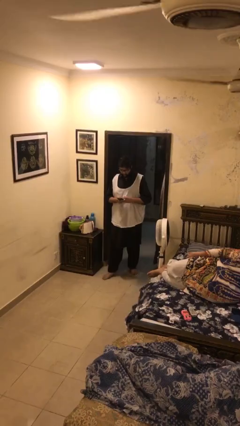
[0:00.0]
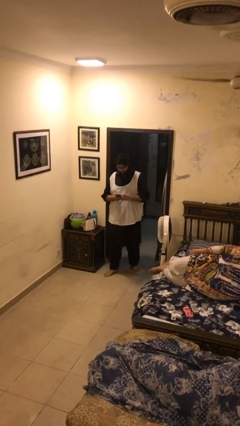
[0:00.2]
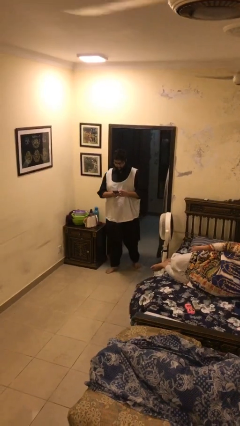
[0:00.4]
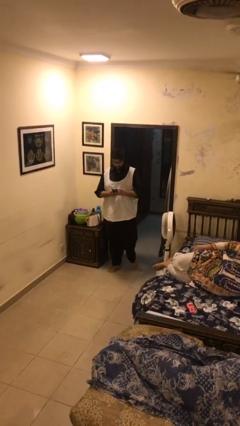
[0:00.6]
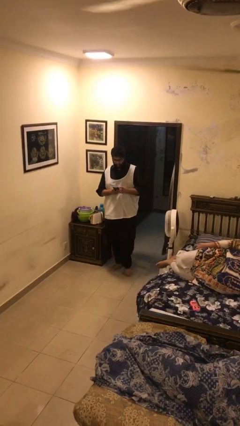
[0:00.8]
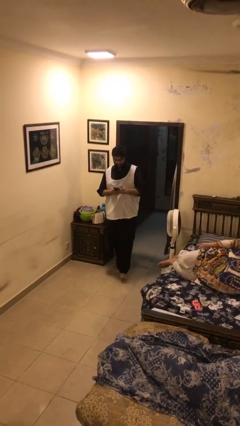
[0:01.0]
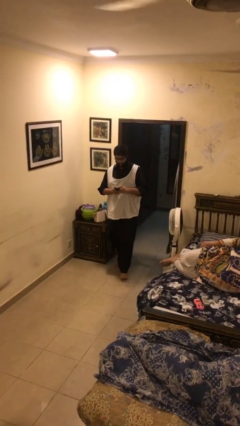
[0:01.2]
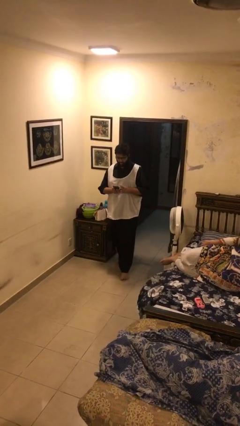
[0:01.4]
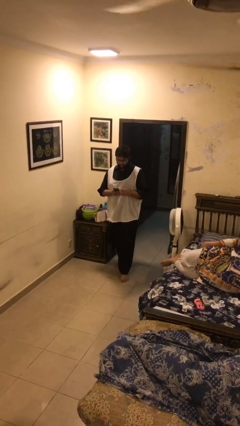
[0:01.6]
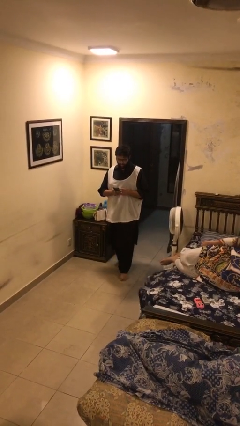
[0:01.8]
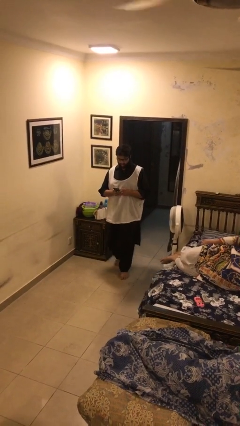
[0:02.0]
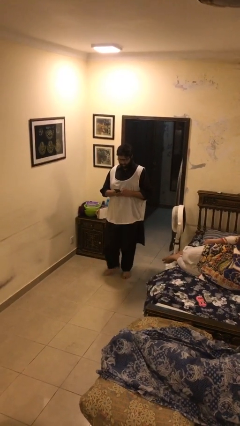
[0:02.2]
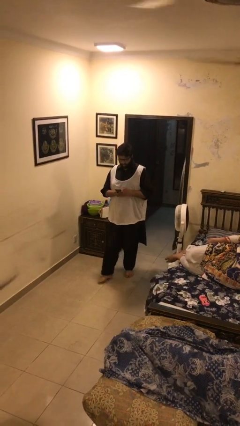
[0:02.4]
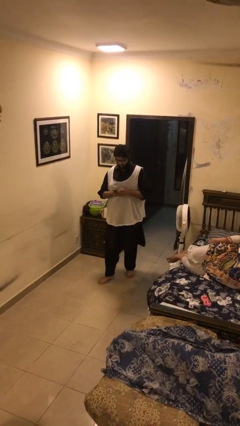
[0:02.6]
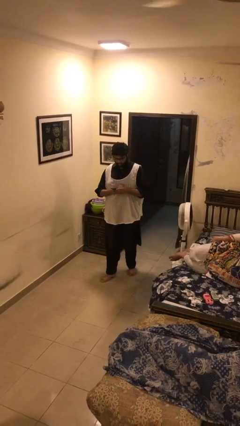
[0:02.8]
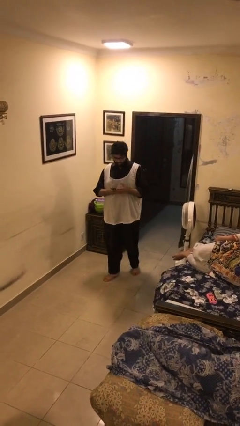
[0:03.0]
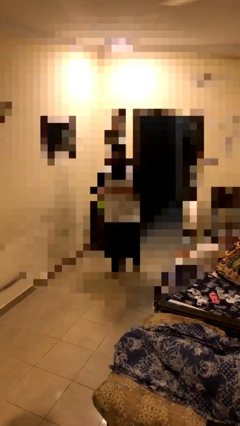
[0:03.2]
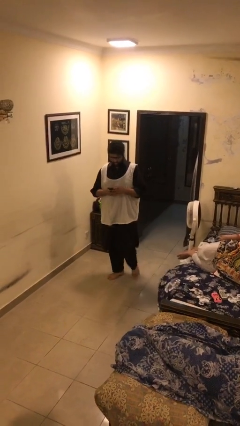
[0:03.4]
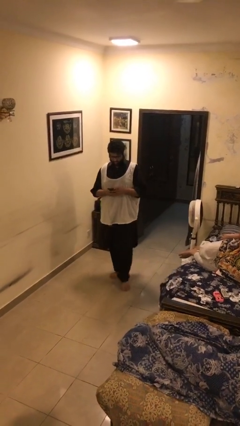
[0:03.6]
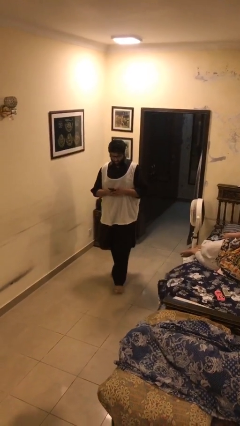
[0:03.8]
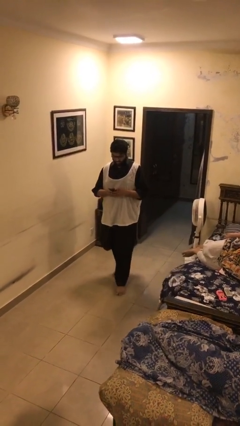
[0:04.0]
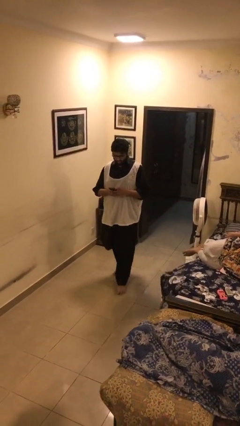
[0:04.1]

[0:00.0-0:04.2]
person texts on phone

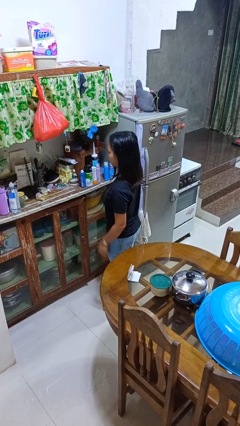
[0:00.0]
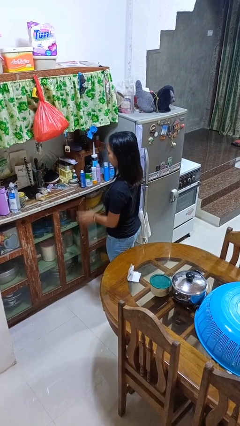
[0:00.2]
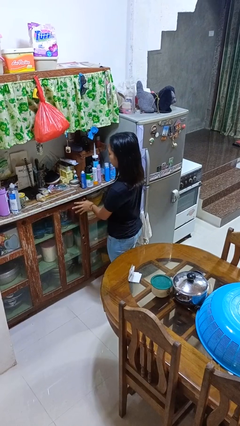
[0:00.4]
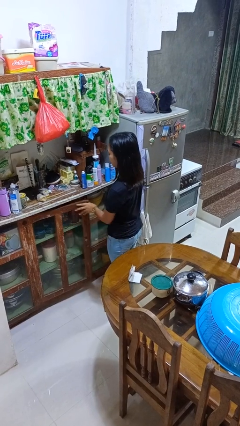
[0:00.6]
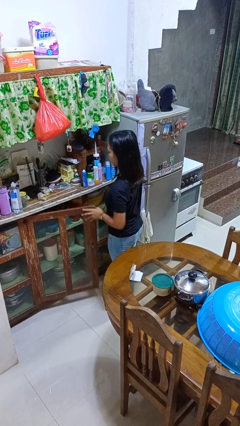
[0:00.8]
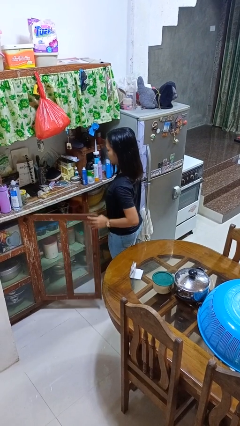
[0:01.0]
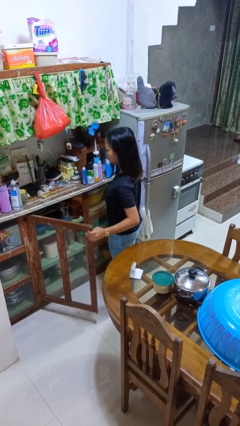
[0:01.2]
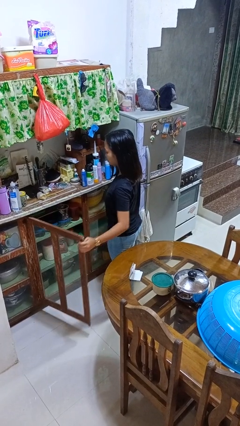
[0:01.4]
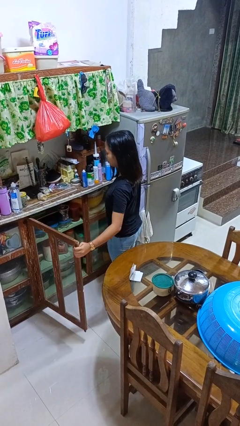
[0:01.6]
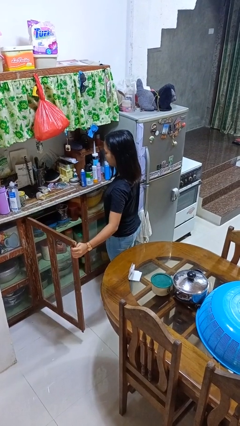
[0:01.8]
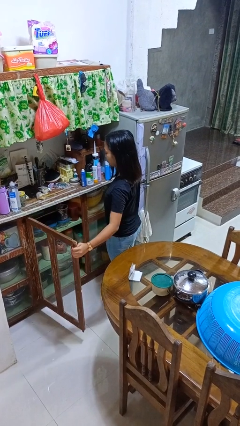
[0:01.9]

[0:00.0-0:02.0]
person opens cabinet

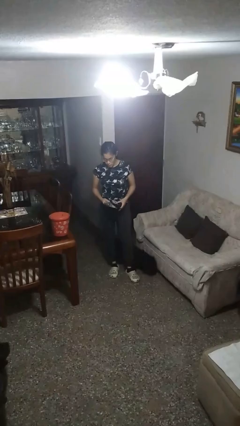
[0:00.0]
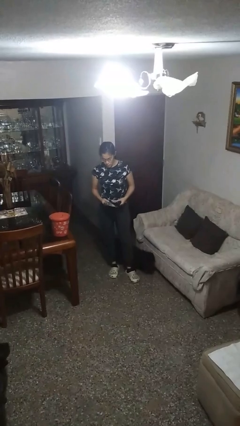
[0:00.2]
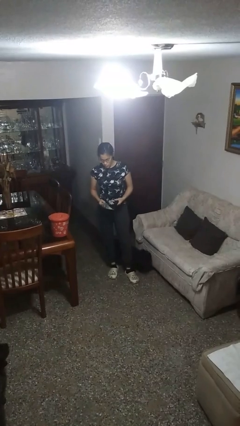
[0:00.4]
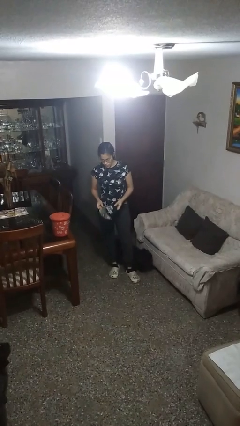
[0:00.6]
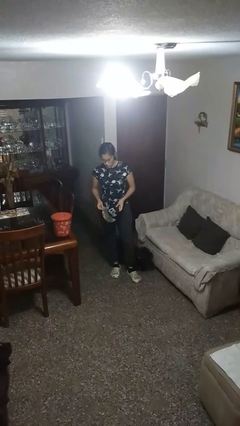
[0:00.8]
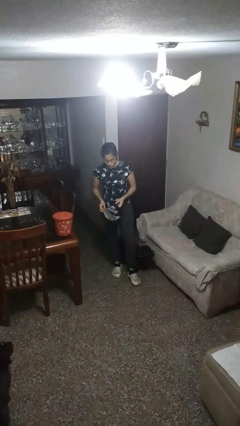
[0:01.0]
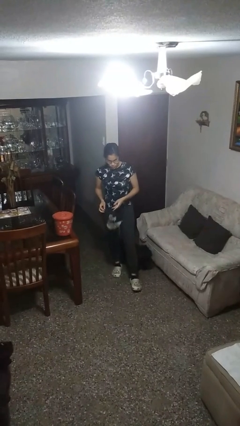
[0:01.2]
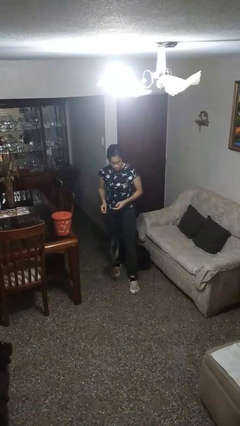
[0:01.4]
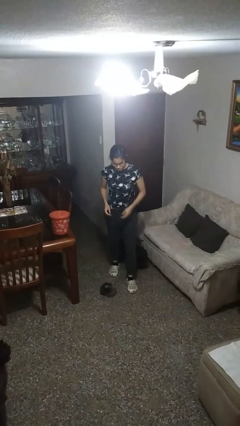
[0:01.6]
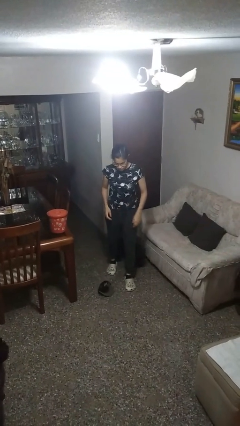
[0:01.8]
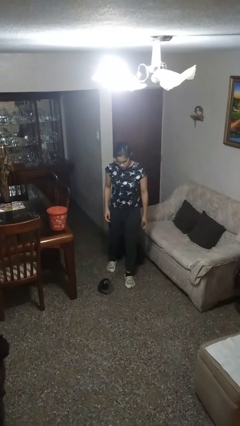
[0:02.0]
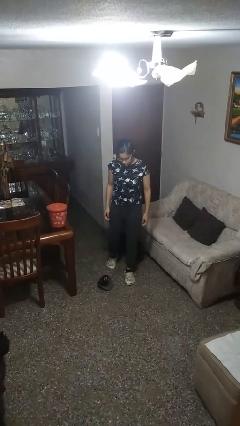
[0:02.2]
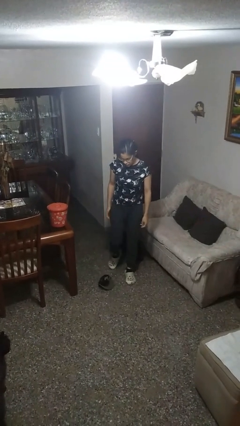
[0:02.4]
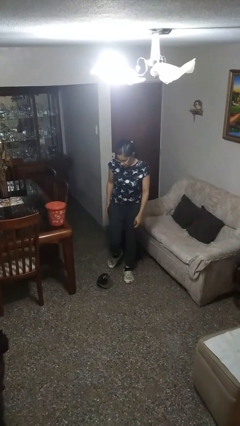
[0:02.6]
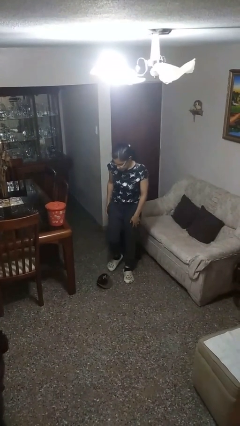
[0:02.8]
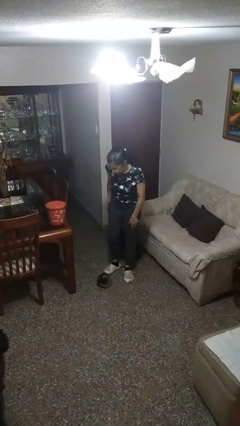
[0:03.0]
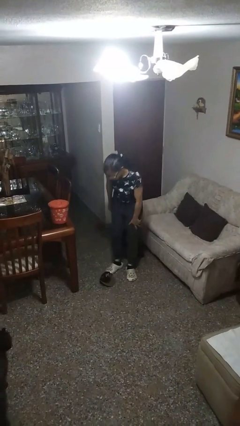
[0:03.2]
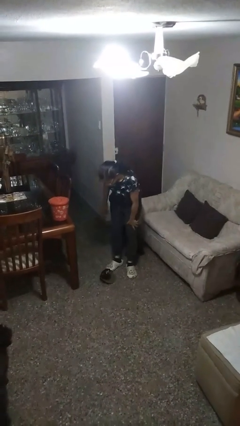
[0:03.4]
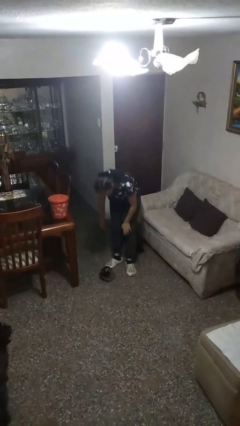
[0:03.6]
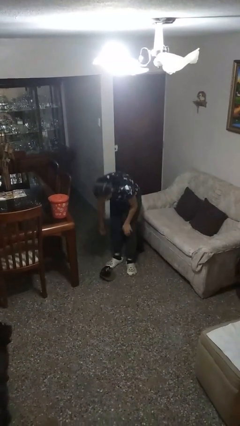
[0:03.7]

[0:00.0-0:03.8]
person drops object

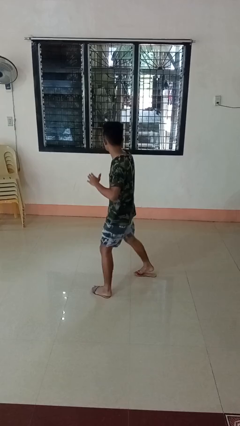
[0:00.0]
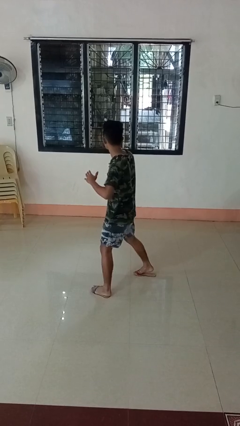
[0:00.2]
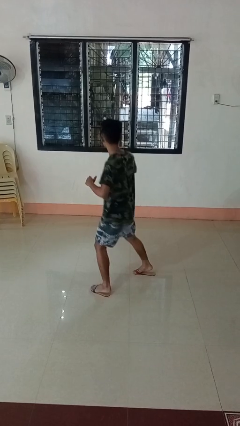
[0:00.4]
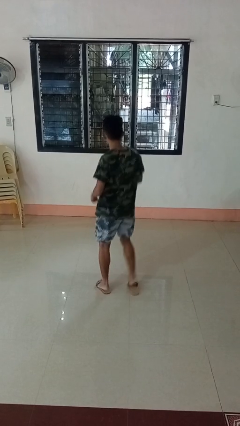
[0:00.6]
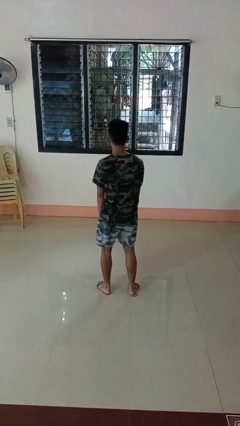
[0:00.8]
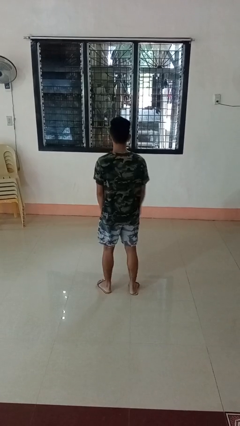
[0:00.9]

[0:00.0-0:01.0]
person karate chop

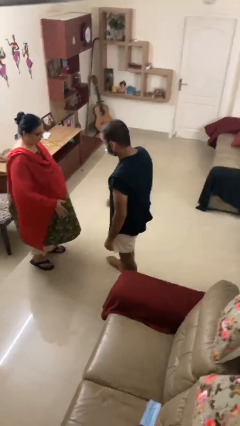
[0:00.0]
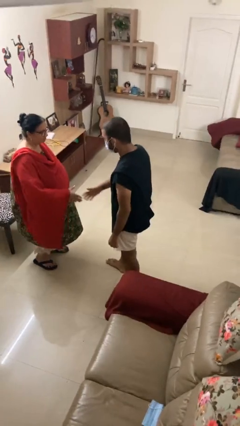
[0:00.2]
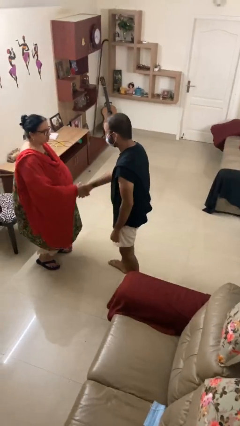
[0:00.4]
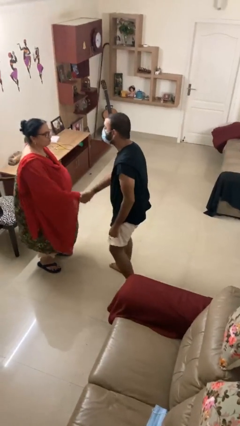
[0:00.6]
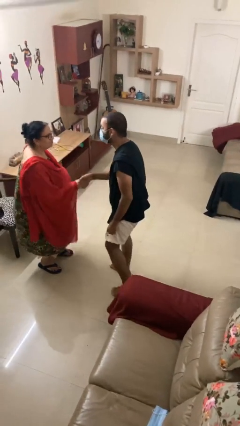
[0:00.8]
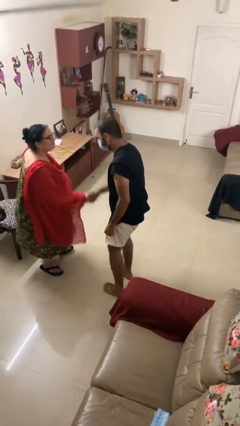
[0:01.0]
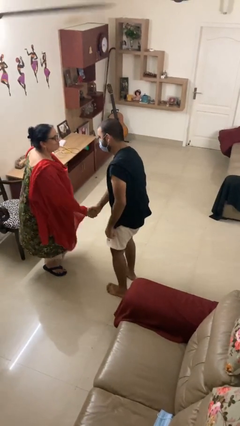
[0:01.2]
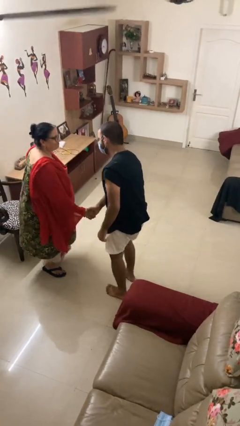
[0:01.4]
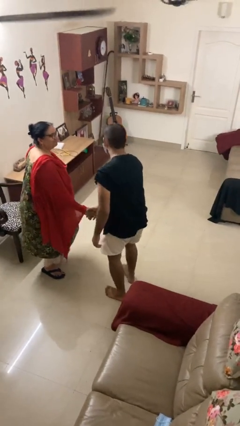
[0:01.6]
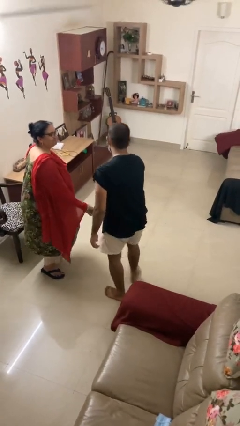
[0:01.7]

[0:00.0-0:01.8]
person shakes hand

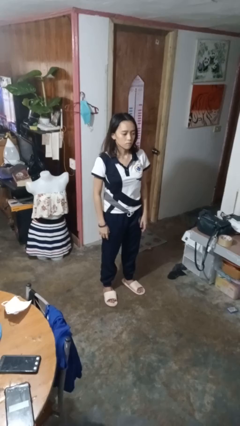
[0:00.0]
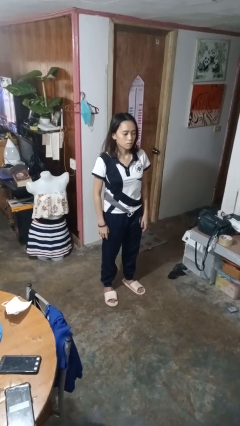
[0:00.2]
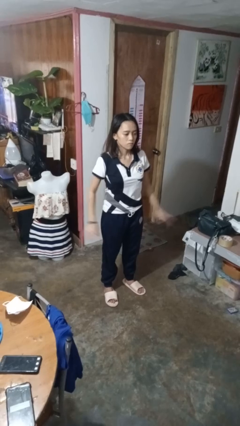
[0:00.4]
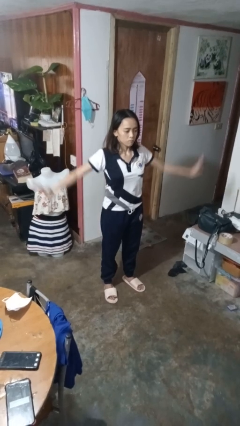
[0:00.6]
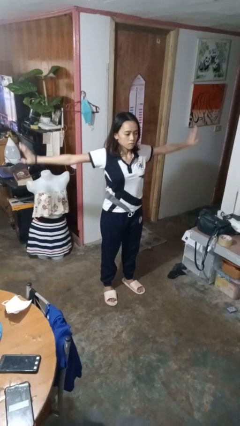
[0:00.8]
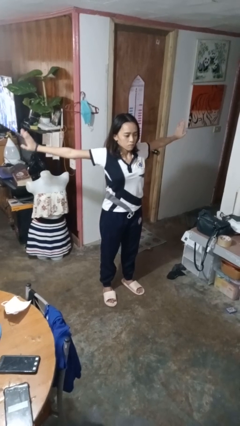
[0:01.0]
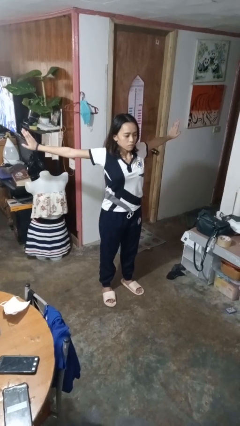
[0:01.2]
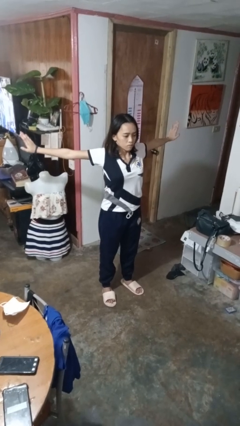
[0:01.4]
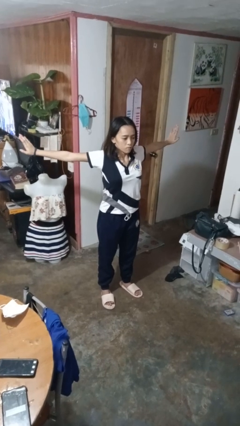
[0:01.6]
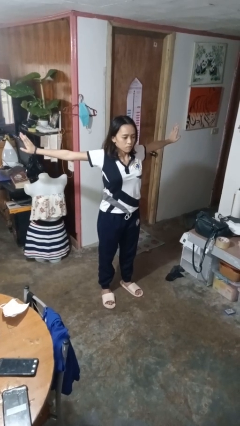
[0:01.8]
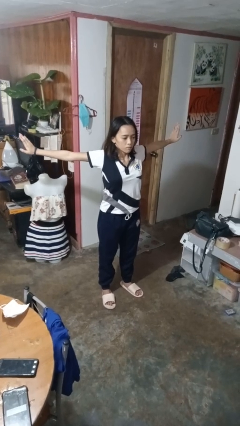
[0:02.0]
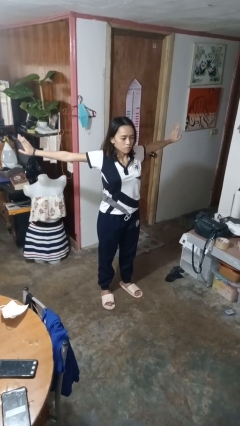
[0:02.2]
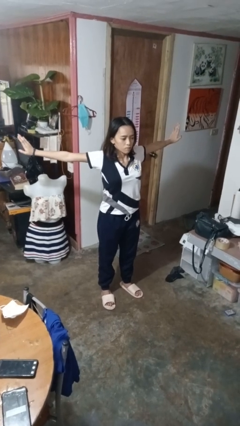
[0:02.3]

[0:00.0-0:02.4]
person stretches arms to side

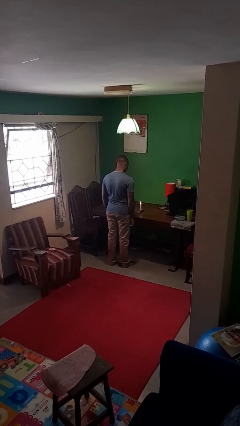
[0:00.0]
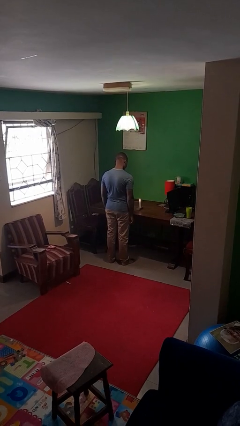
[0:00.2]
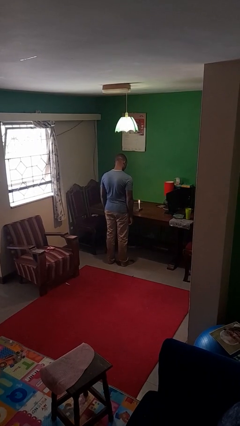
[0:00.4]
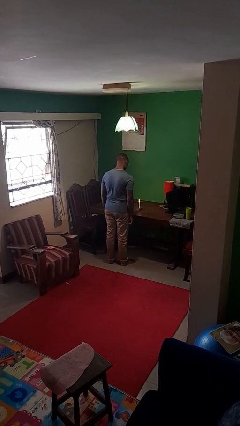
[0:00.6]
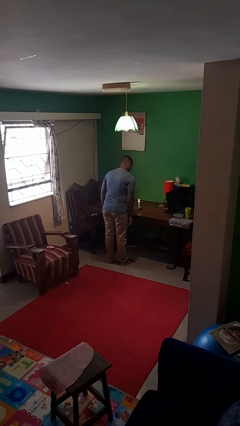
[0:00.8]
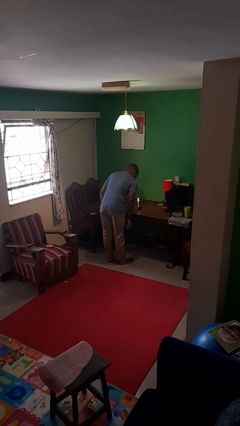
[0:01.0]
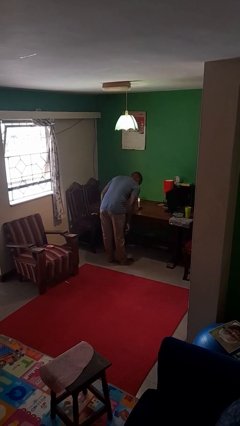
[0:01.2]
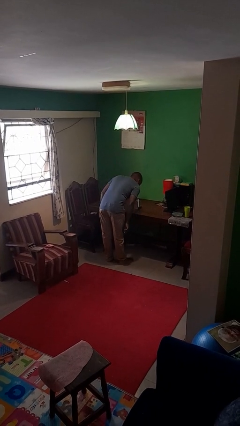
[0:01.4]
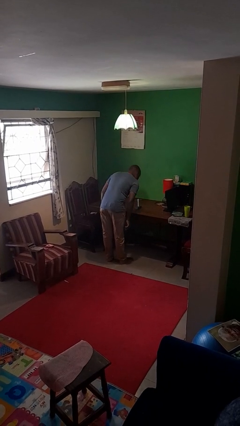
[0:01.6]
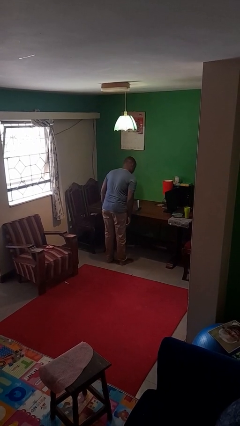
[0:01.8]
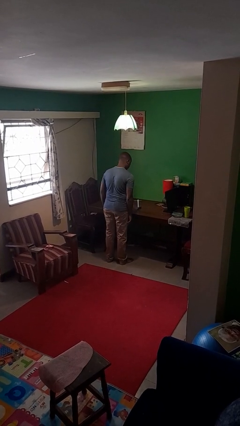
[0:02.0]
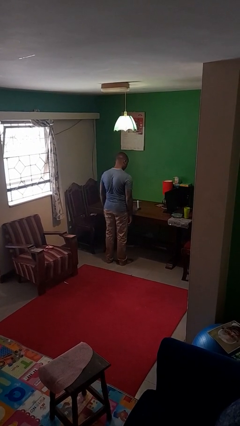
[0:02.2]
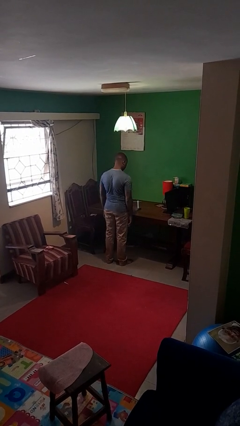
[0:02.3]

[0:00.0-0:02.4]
person extinguishes candle
